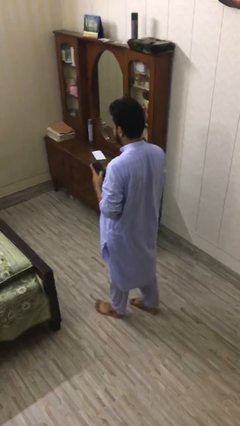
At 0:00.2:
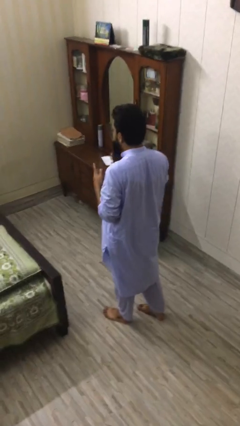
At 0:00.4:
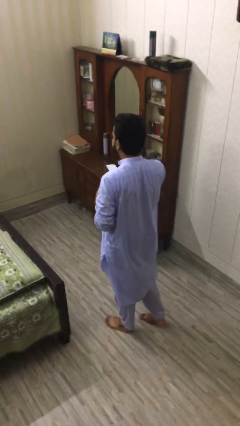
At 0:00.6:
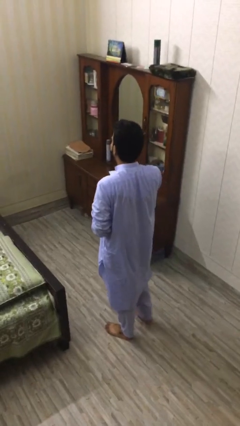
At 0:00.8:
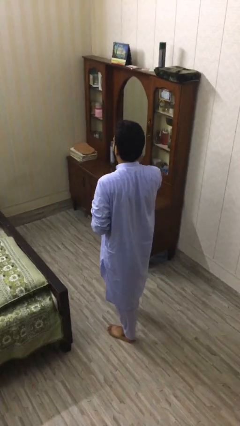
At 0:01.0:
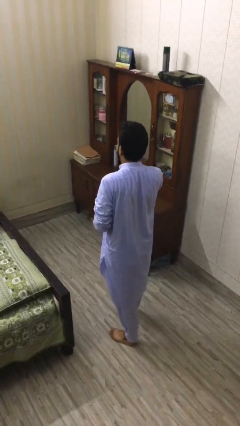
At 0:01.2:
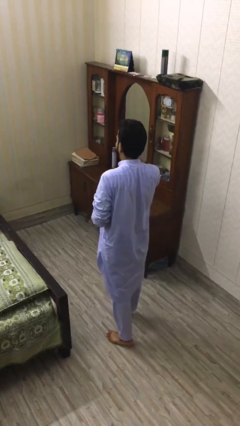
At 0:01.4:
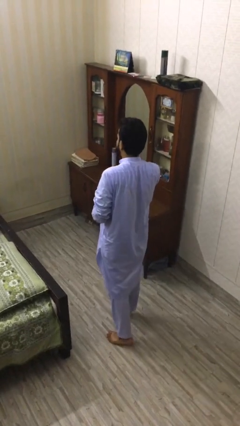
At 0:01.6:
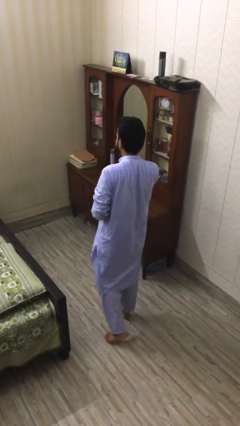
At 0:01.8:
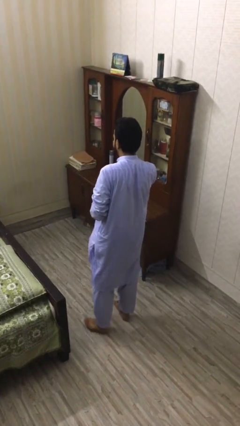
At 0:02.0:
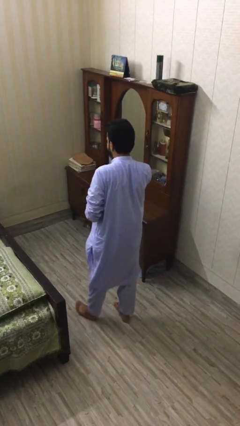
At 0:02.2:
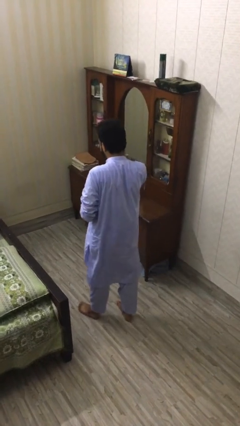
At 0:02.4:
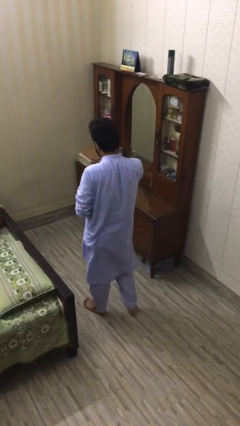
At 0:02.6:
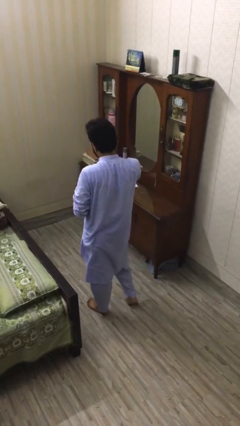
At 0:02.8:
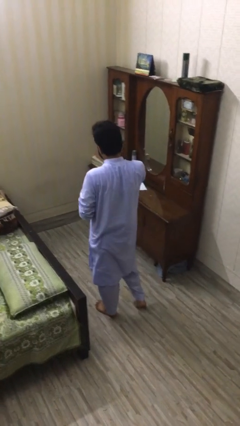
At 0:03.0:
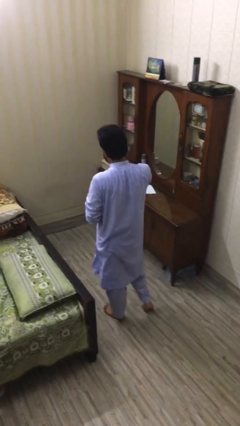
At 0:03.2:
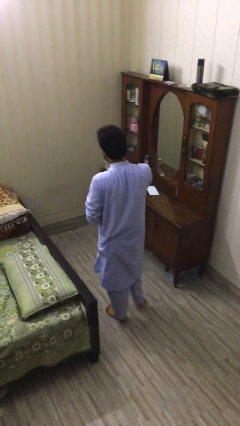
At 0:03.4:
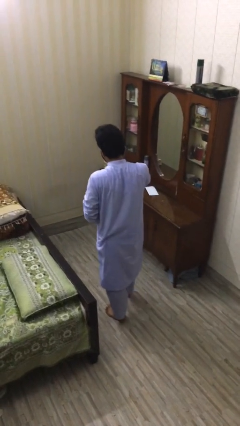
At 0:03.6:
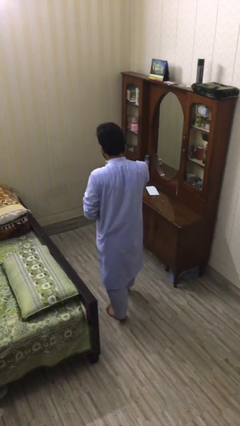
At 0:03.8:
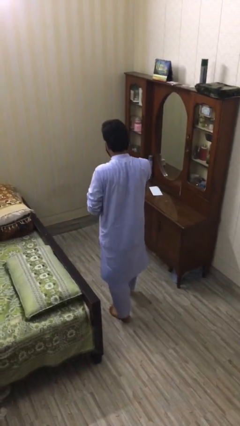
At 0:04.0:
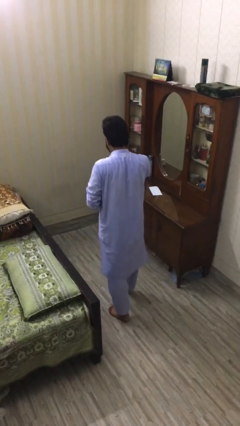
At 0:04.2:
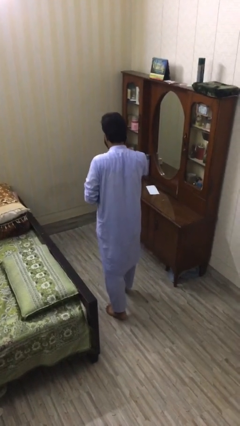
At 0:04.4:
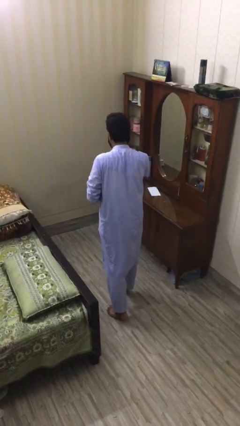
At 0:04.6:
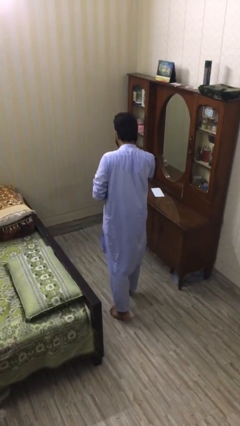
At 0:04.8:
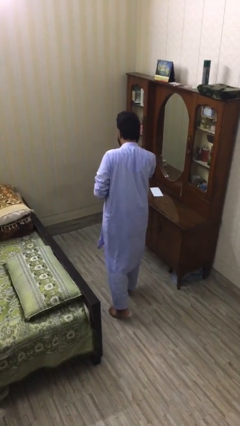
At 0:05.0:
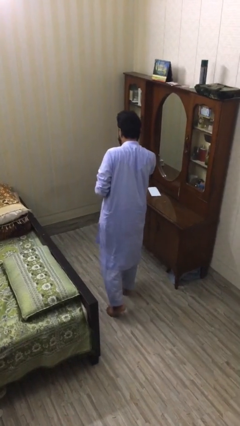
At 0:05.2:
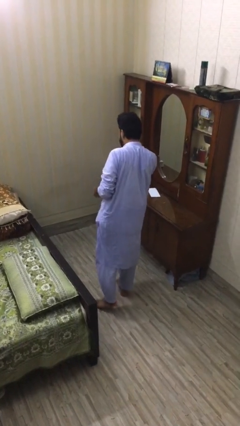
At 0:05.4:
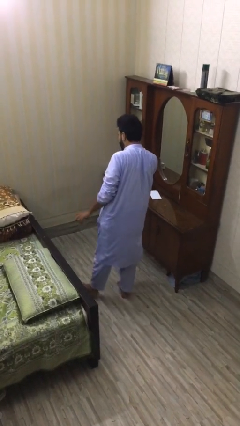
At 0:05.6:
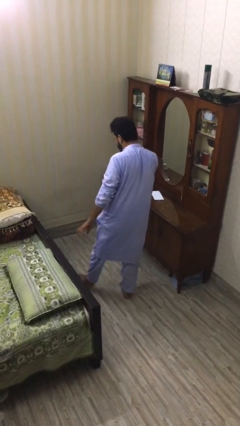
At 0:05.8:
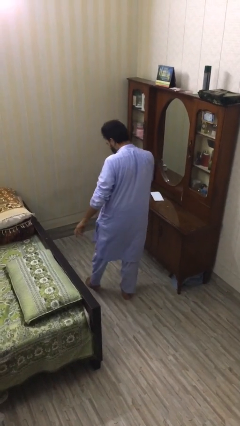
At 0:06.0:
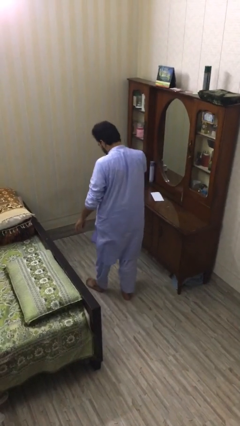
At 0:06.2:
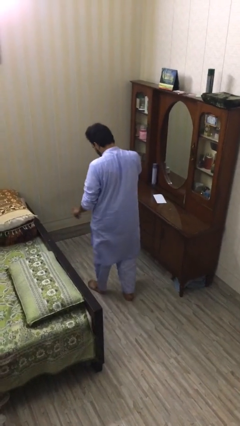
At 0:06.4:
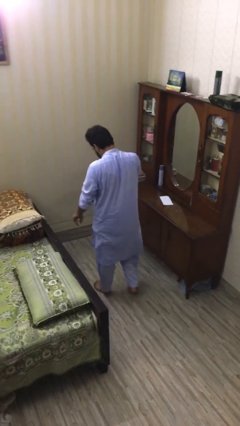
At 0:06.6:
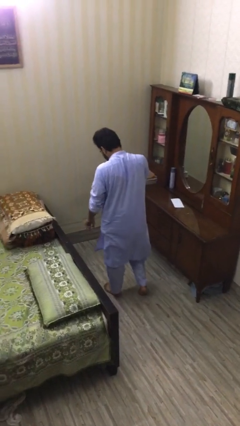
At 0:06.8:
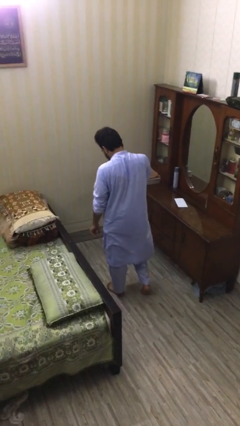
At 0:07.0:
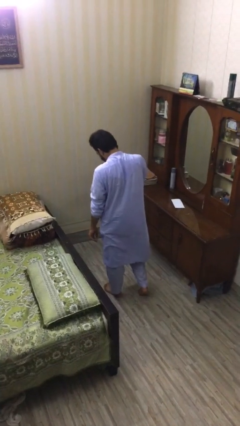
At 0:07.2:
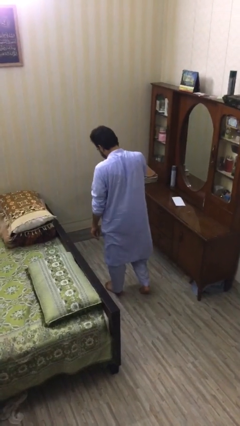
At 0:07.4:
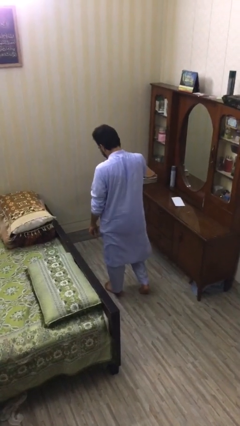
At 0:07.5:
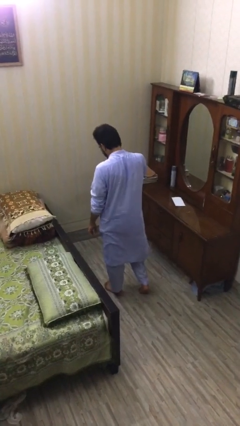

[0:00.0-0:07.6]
person talks on phone

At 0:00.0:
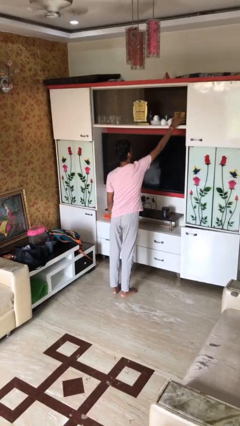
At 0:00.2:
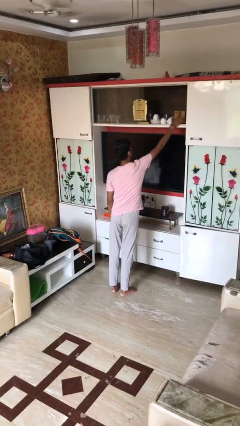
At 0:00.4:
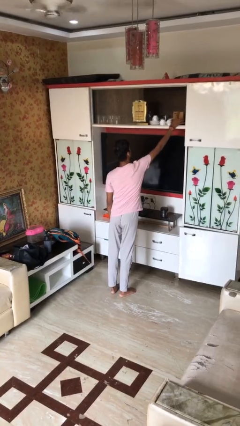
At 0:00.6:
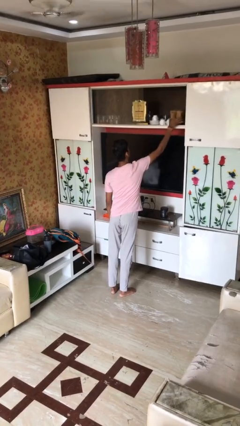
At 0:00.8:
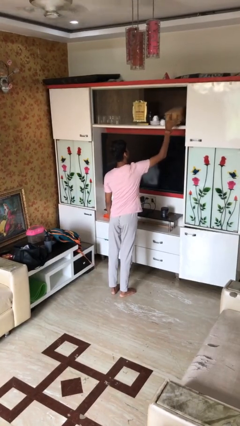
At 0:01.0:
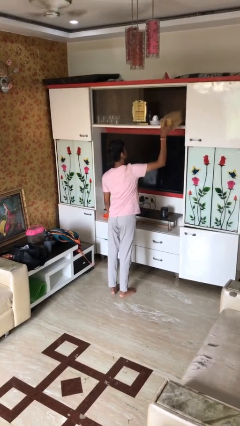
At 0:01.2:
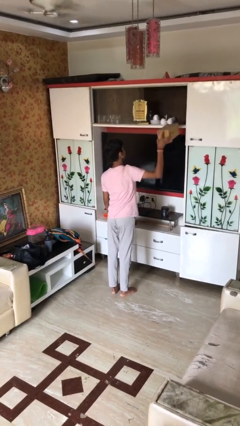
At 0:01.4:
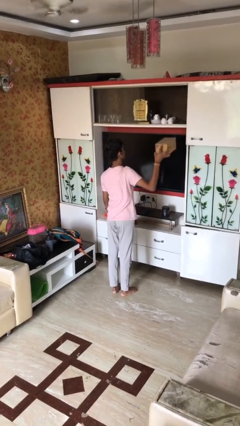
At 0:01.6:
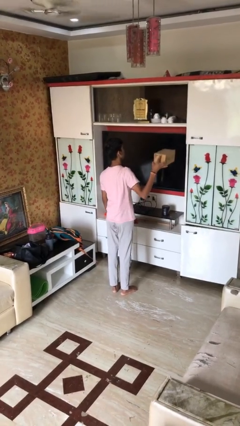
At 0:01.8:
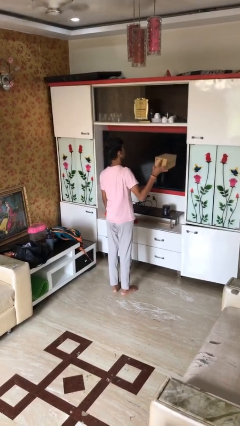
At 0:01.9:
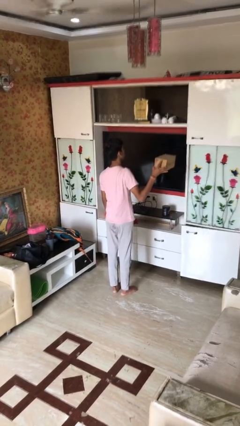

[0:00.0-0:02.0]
person picks up object from shelf

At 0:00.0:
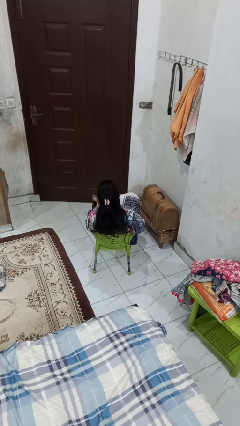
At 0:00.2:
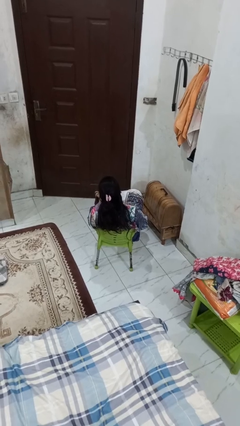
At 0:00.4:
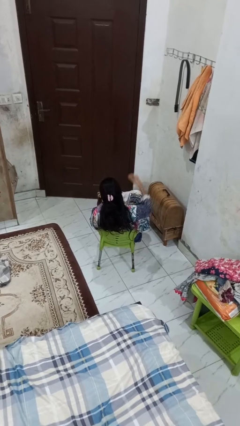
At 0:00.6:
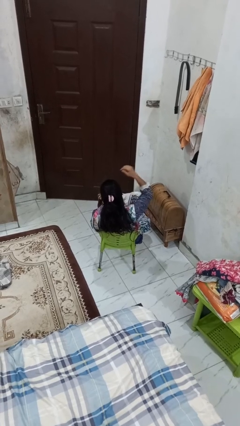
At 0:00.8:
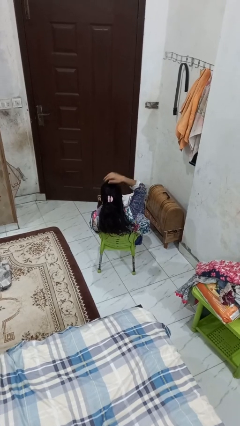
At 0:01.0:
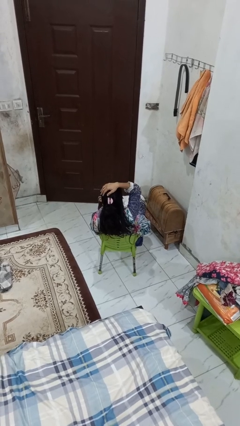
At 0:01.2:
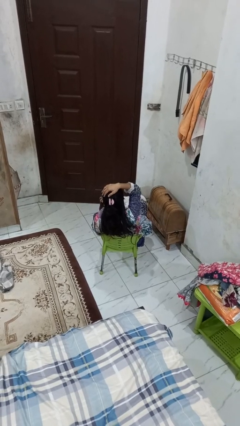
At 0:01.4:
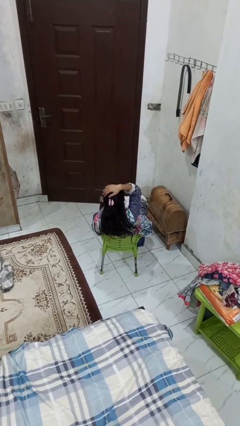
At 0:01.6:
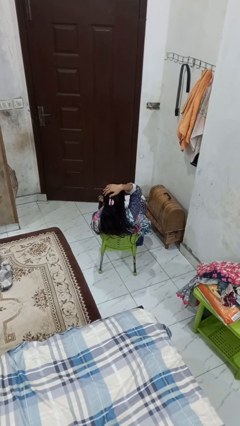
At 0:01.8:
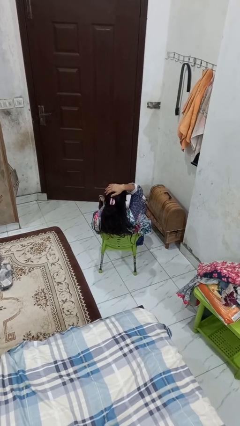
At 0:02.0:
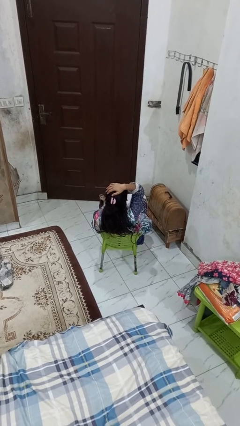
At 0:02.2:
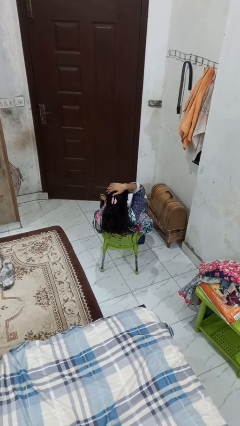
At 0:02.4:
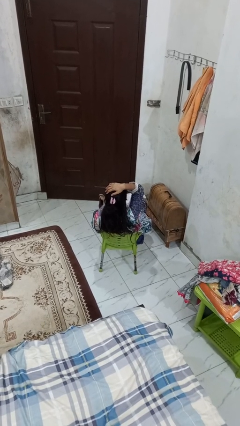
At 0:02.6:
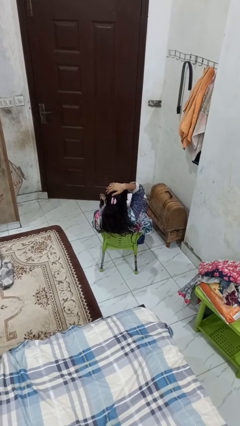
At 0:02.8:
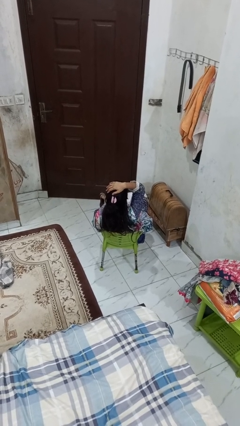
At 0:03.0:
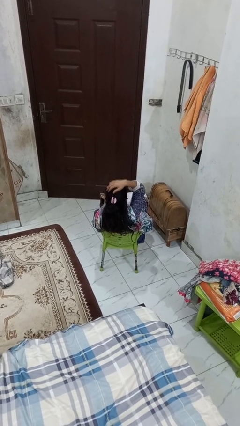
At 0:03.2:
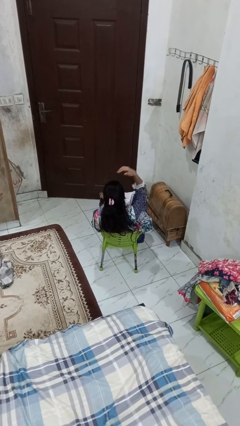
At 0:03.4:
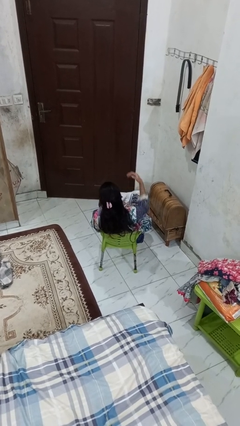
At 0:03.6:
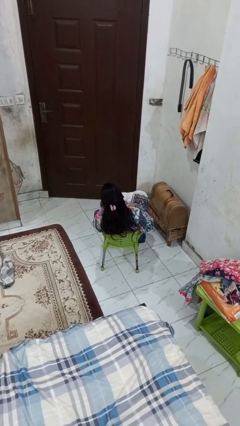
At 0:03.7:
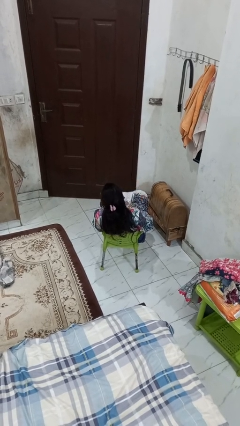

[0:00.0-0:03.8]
person pats head

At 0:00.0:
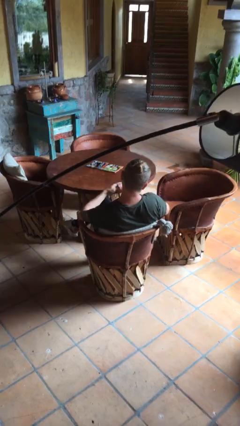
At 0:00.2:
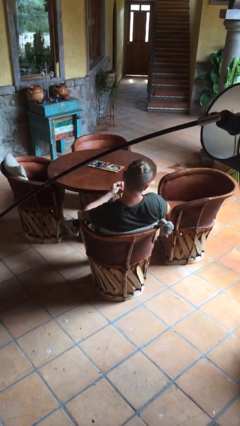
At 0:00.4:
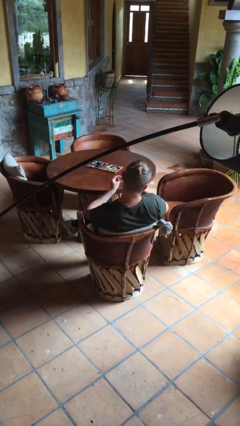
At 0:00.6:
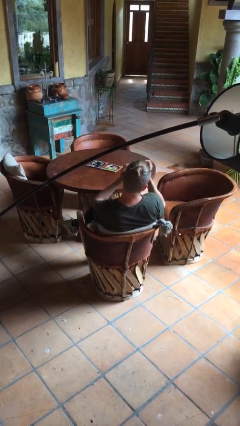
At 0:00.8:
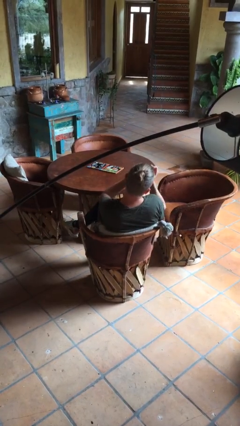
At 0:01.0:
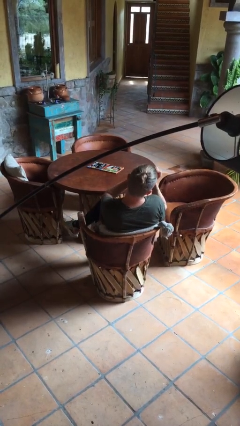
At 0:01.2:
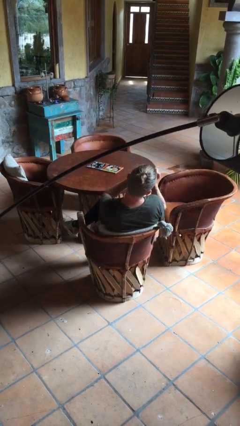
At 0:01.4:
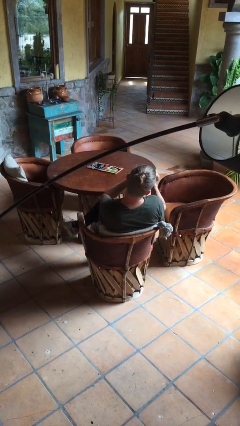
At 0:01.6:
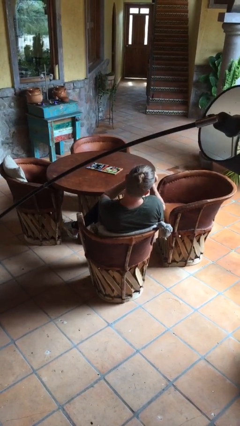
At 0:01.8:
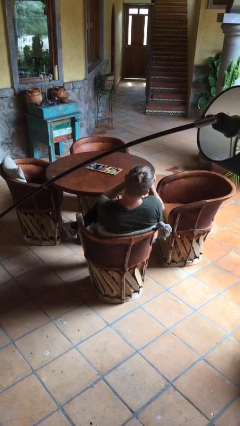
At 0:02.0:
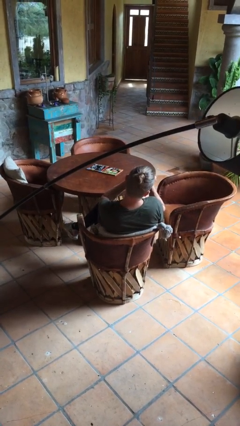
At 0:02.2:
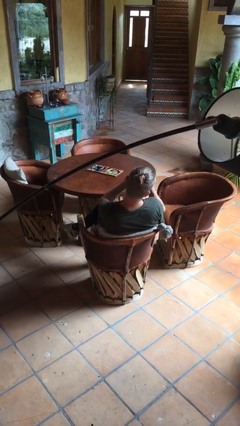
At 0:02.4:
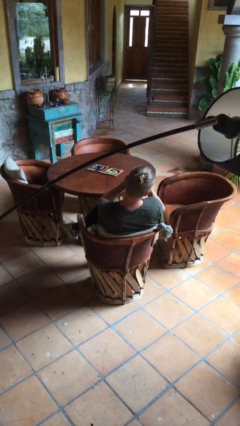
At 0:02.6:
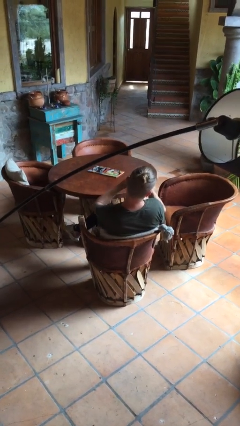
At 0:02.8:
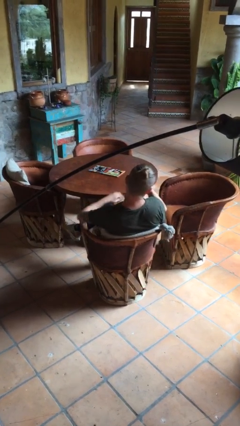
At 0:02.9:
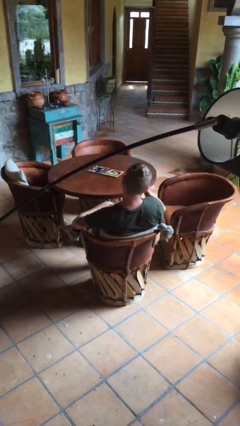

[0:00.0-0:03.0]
person files fingernails

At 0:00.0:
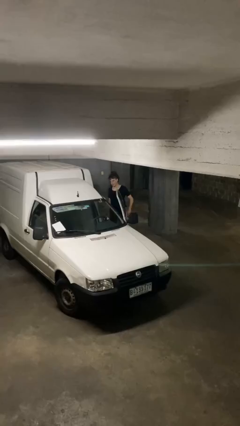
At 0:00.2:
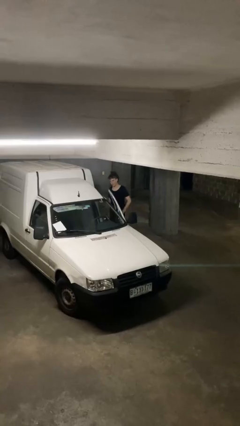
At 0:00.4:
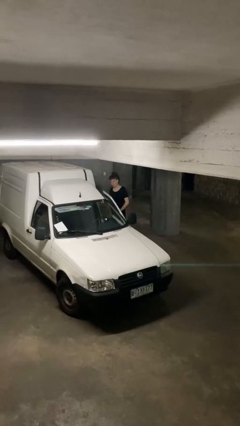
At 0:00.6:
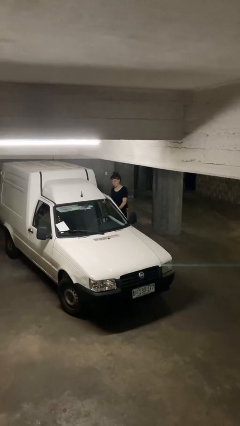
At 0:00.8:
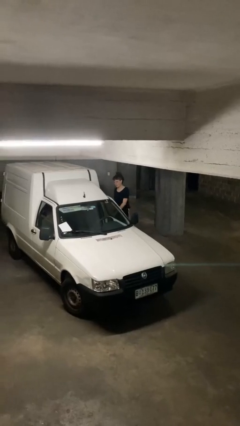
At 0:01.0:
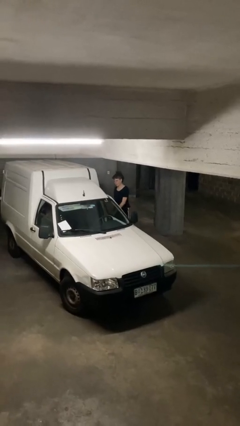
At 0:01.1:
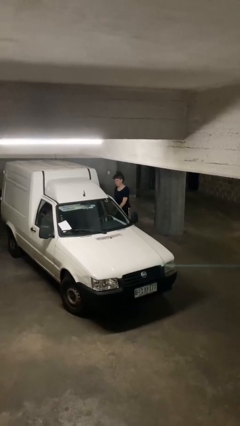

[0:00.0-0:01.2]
person closes car door
